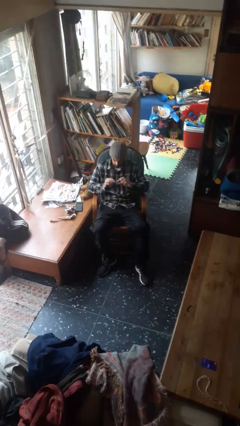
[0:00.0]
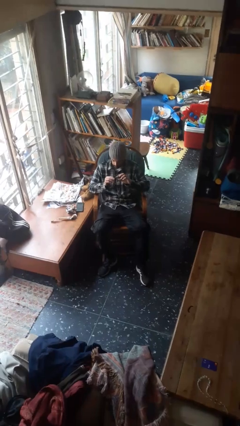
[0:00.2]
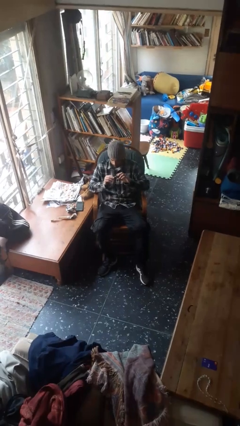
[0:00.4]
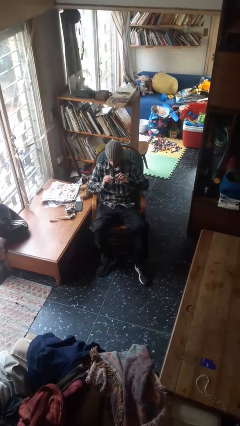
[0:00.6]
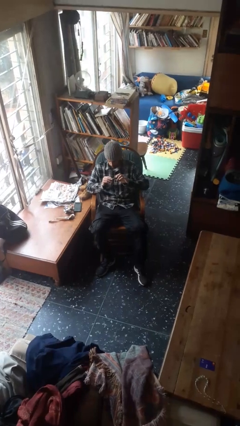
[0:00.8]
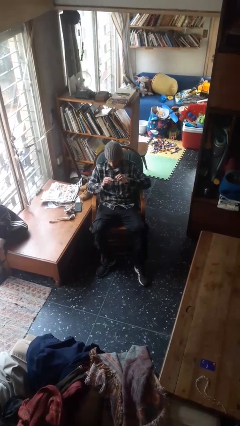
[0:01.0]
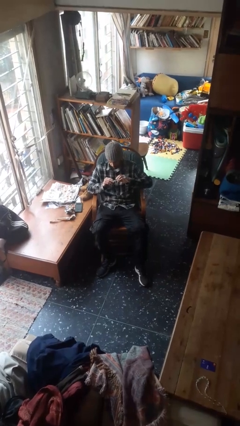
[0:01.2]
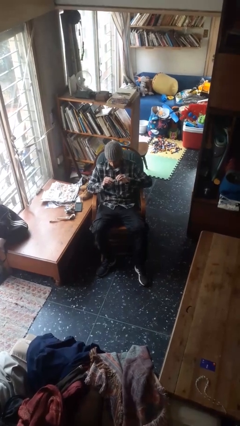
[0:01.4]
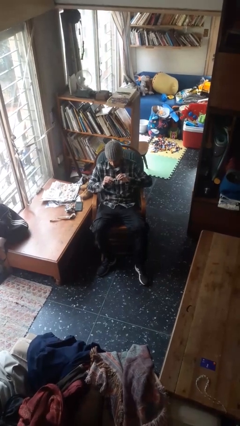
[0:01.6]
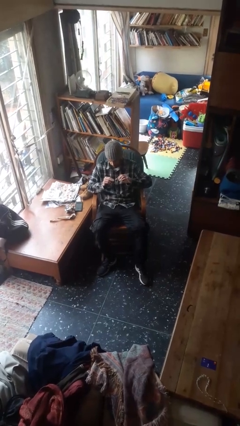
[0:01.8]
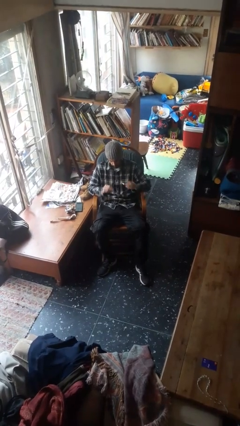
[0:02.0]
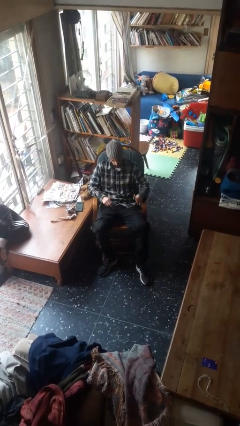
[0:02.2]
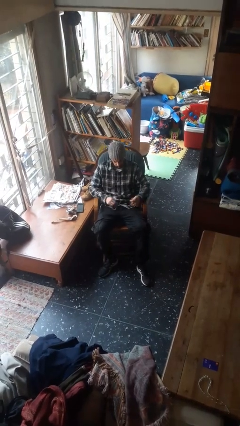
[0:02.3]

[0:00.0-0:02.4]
person clips fingernails

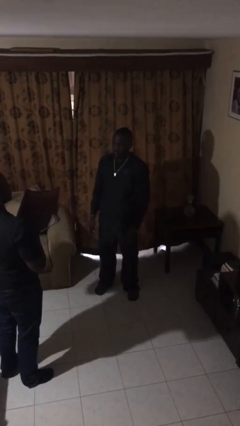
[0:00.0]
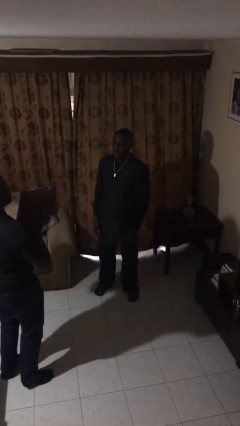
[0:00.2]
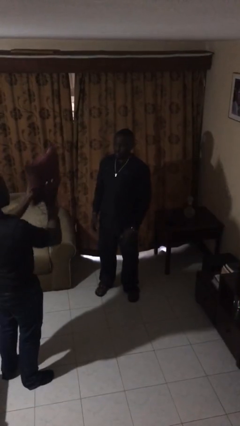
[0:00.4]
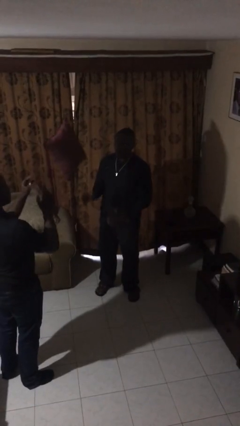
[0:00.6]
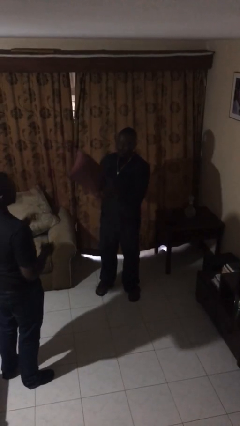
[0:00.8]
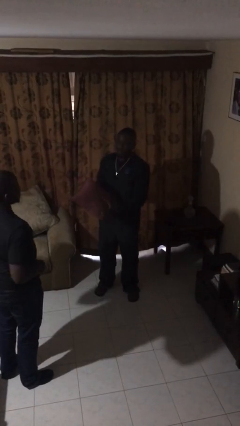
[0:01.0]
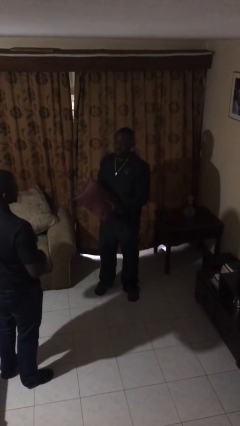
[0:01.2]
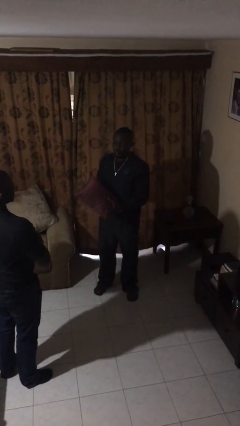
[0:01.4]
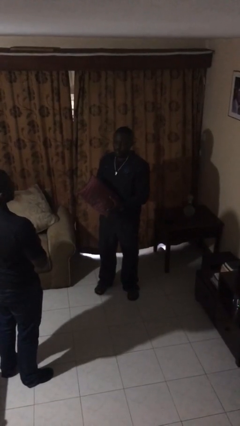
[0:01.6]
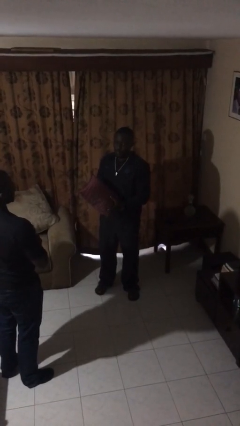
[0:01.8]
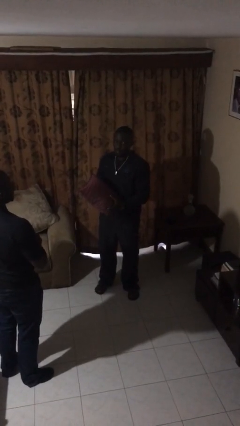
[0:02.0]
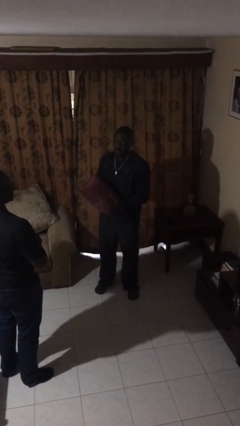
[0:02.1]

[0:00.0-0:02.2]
person catches object from person

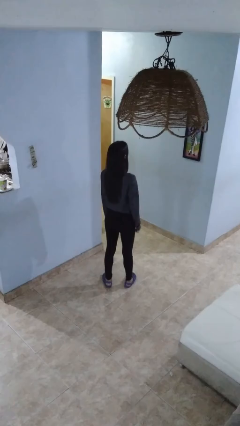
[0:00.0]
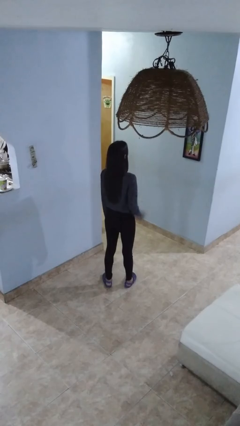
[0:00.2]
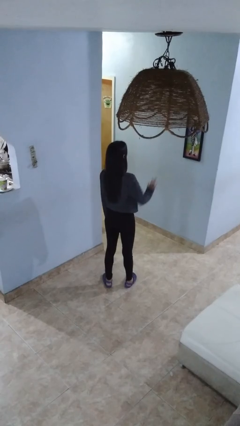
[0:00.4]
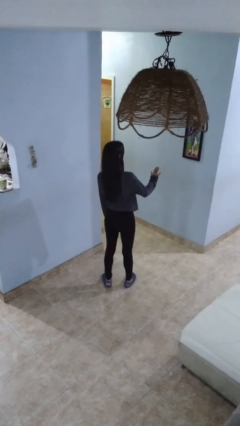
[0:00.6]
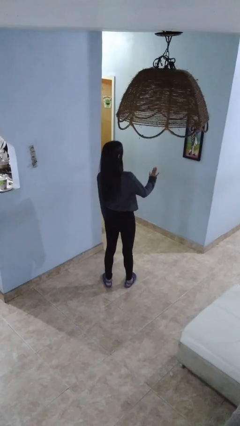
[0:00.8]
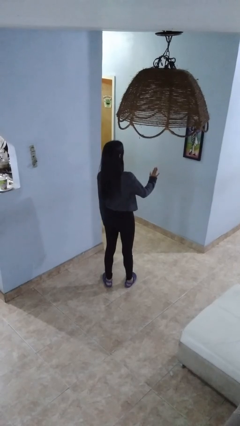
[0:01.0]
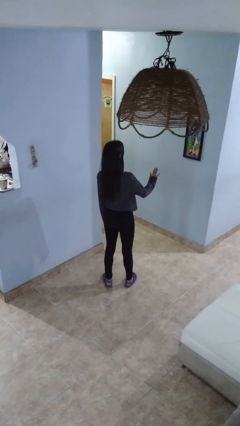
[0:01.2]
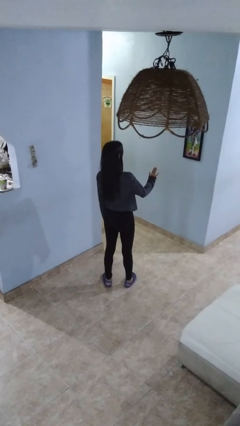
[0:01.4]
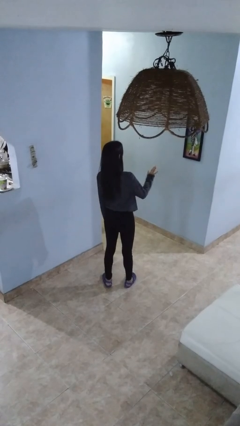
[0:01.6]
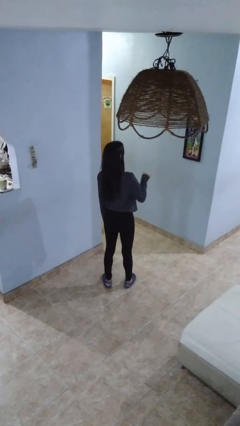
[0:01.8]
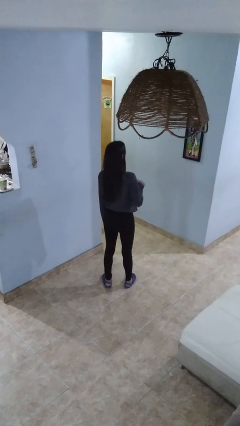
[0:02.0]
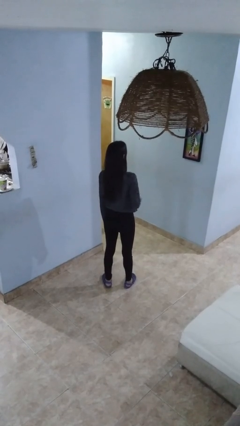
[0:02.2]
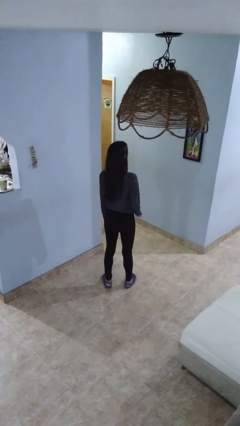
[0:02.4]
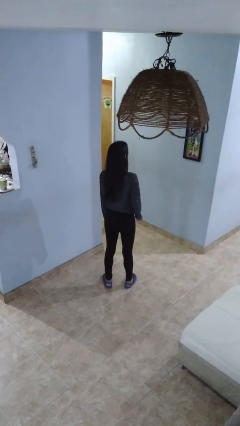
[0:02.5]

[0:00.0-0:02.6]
person gestures stop

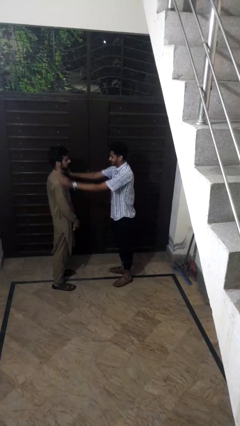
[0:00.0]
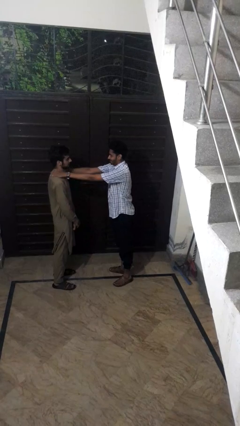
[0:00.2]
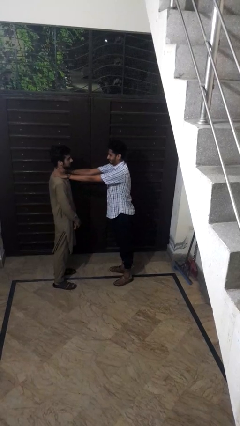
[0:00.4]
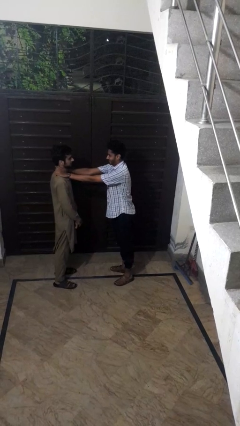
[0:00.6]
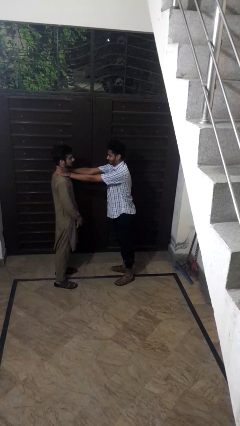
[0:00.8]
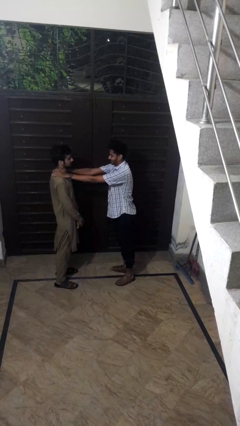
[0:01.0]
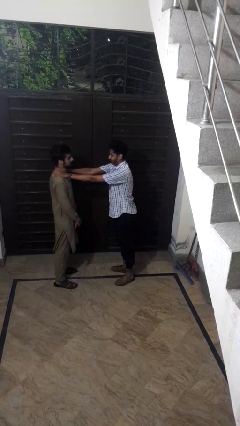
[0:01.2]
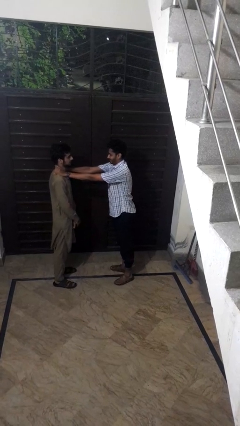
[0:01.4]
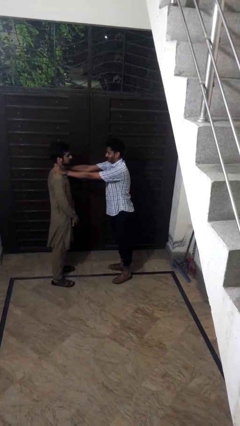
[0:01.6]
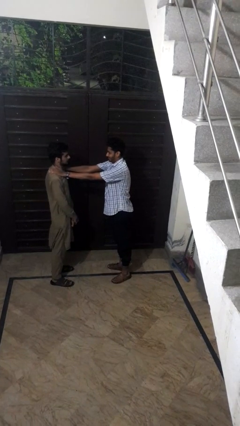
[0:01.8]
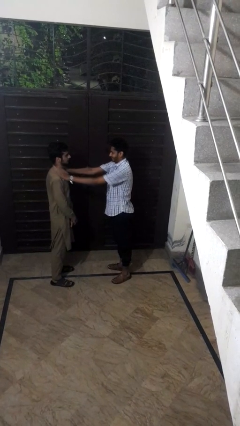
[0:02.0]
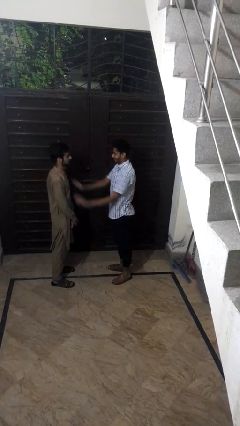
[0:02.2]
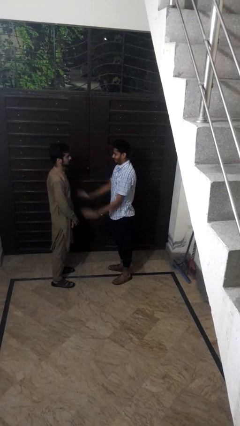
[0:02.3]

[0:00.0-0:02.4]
person pounds shoulders of person

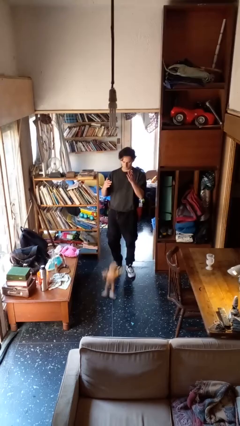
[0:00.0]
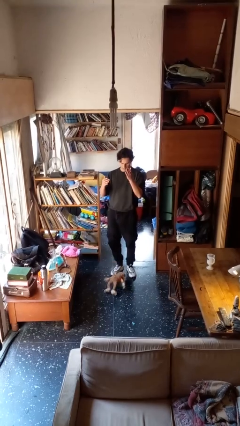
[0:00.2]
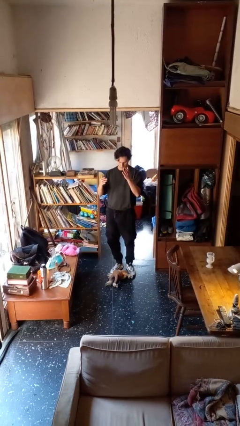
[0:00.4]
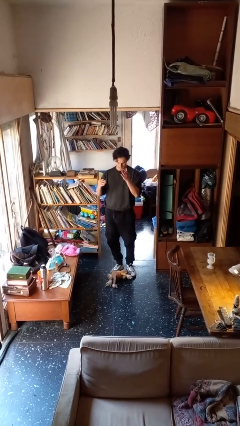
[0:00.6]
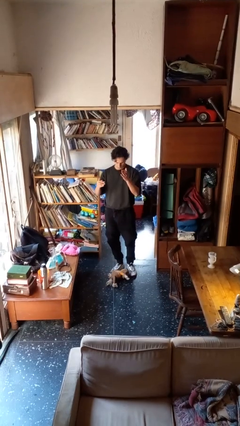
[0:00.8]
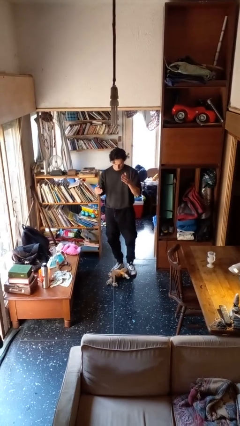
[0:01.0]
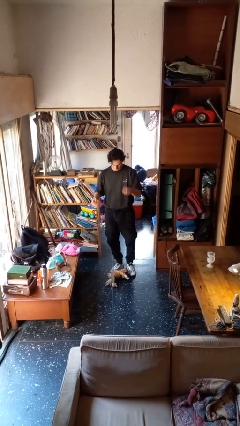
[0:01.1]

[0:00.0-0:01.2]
person drops object

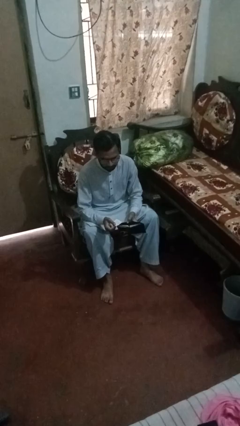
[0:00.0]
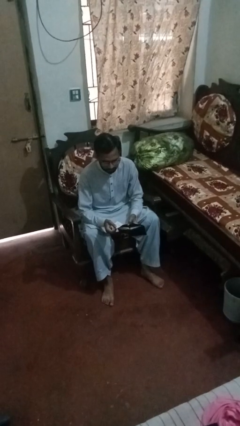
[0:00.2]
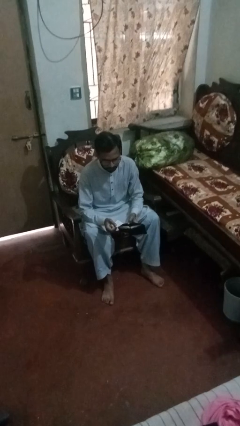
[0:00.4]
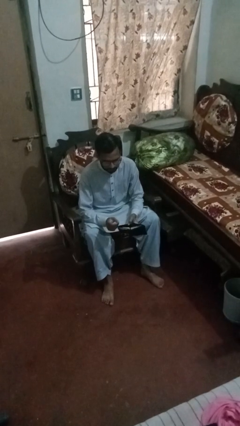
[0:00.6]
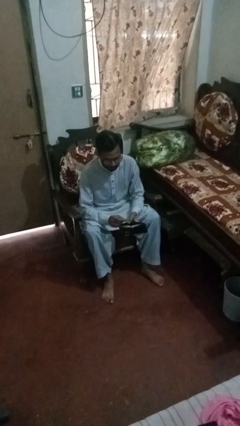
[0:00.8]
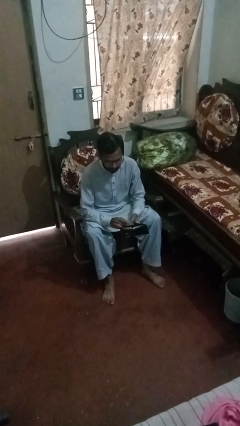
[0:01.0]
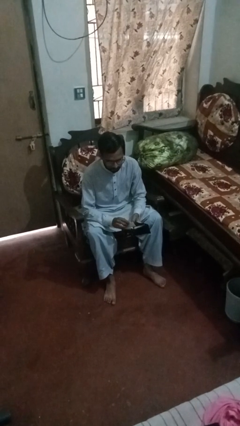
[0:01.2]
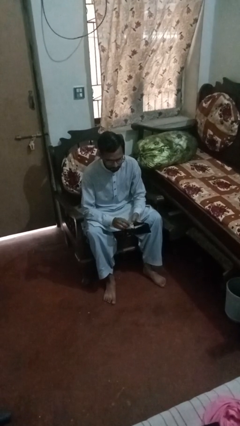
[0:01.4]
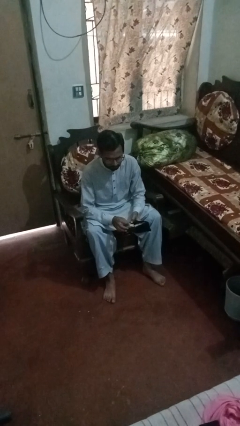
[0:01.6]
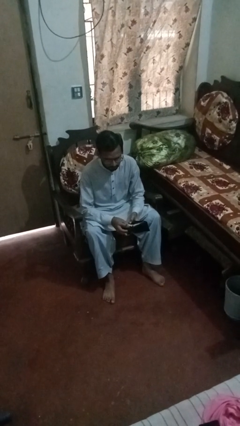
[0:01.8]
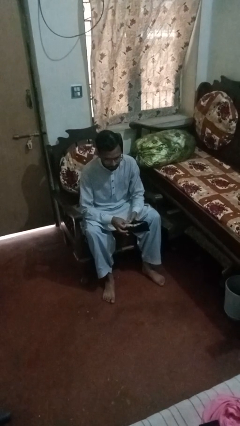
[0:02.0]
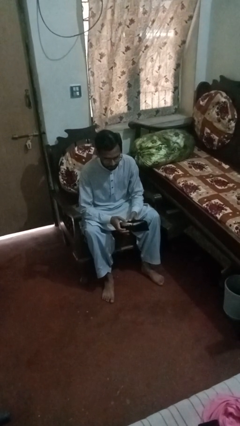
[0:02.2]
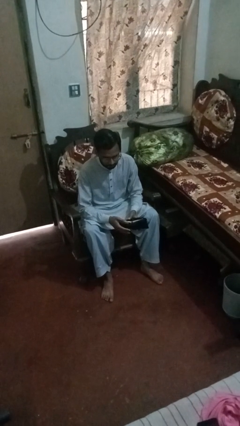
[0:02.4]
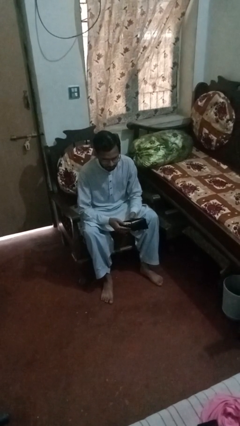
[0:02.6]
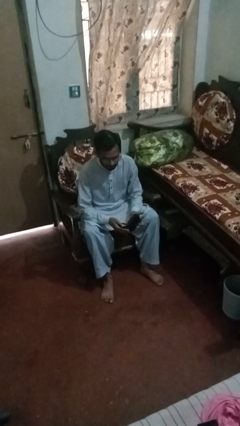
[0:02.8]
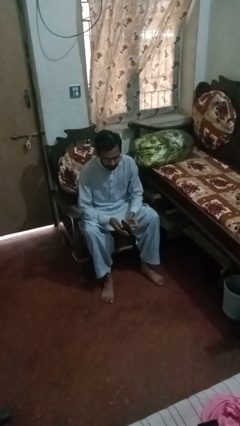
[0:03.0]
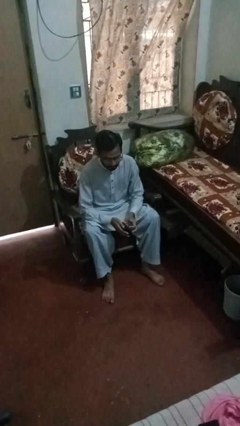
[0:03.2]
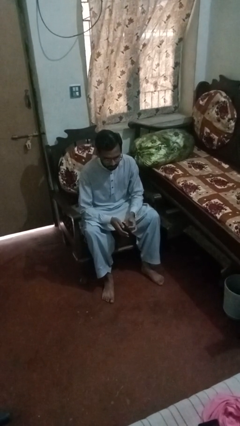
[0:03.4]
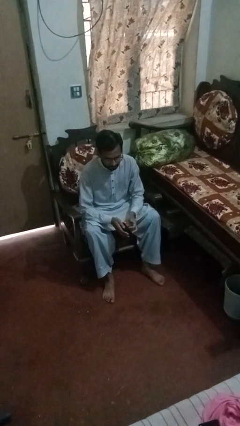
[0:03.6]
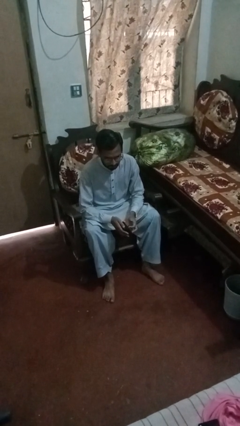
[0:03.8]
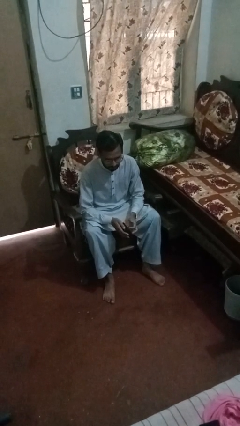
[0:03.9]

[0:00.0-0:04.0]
person puts object into purse

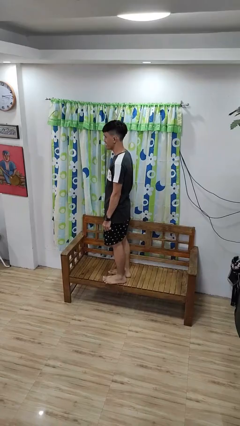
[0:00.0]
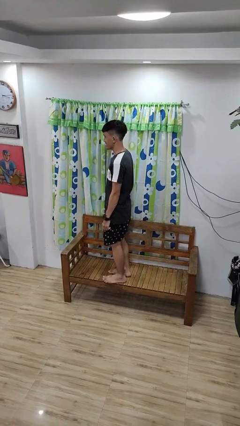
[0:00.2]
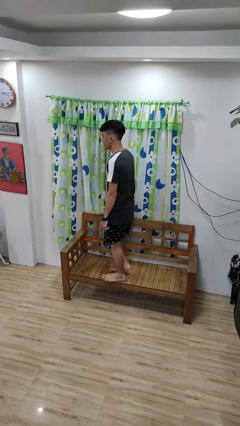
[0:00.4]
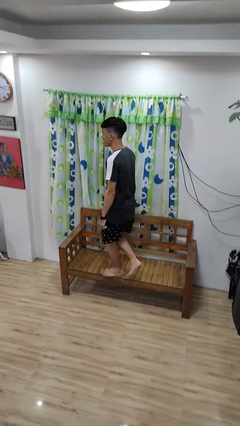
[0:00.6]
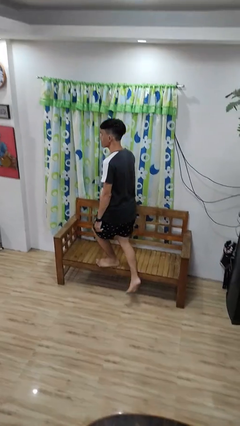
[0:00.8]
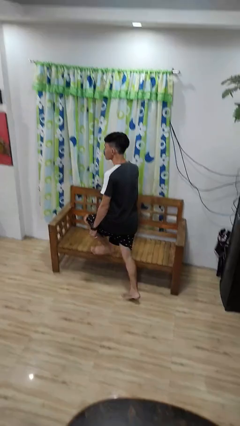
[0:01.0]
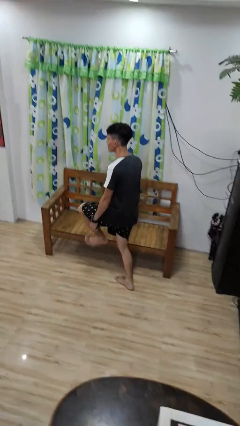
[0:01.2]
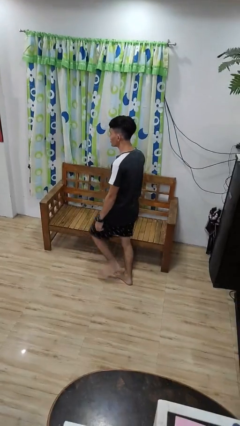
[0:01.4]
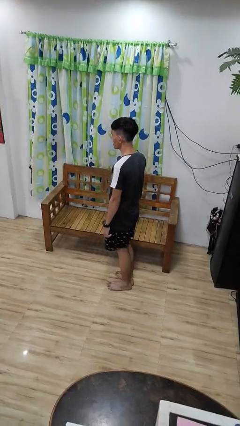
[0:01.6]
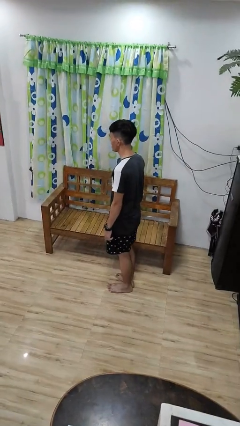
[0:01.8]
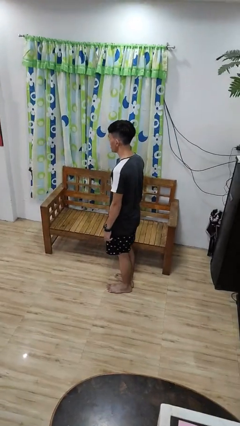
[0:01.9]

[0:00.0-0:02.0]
person climbs off couch

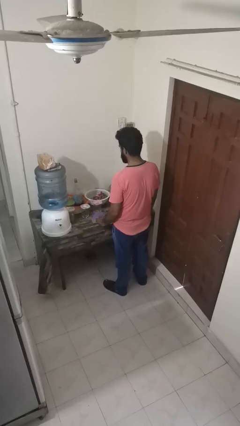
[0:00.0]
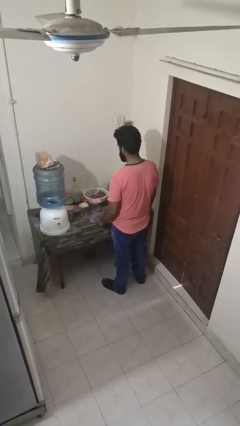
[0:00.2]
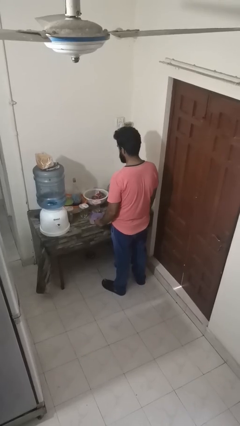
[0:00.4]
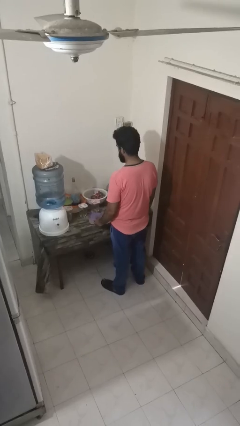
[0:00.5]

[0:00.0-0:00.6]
person puts down object on countertop
